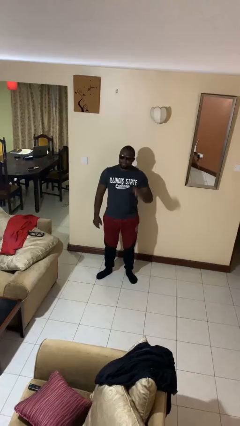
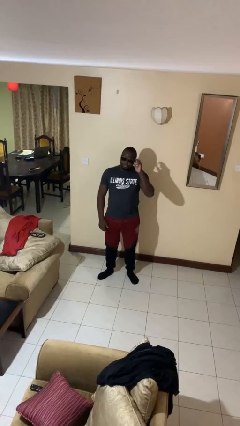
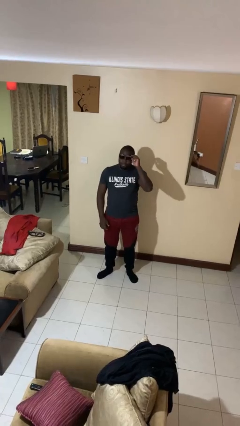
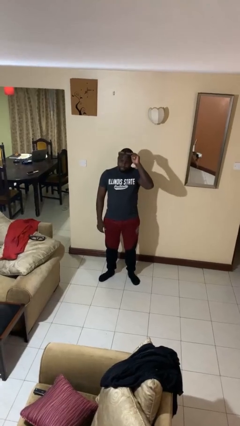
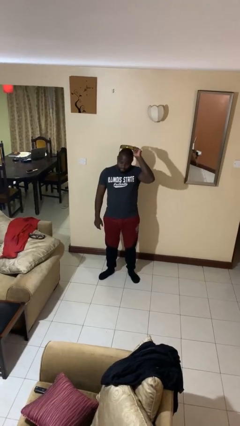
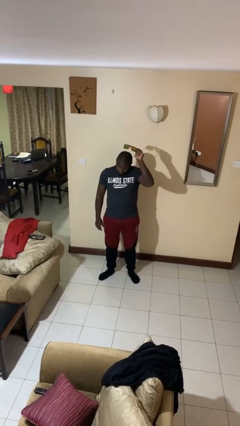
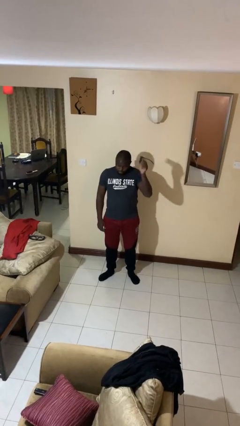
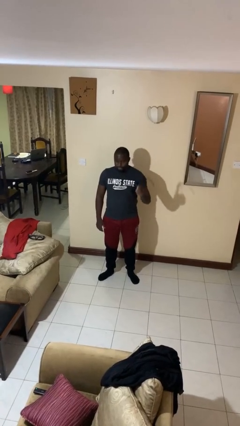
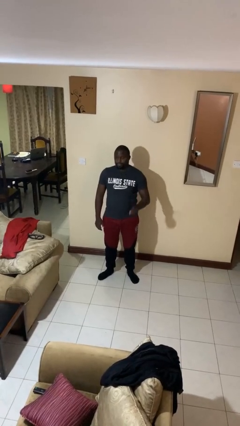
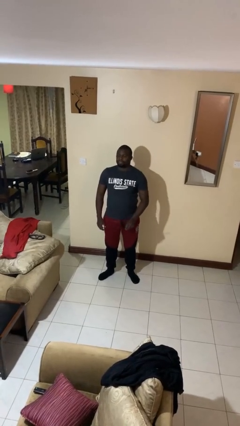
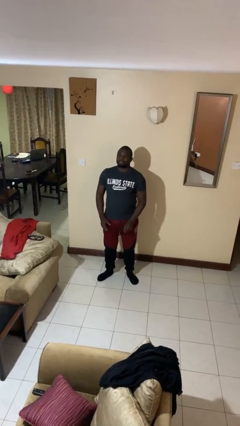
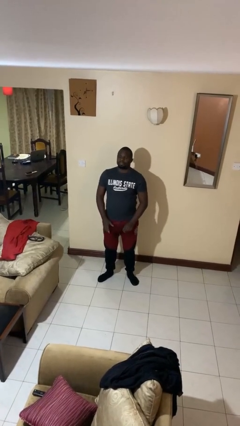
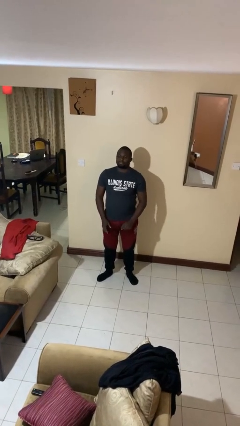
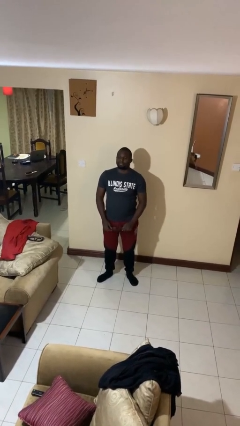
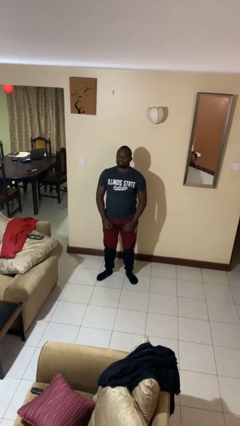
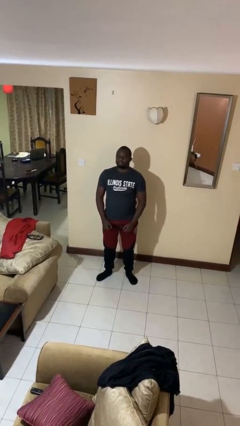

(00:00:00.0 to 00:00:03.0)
person takes off sunglasses

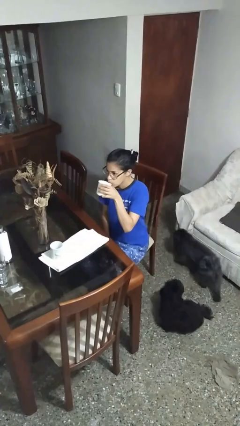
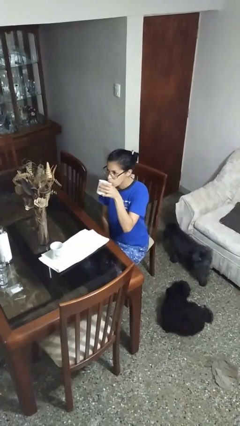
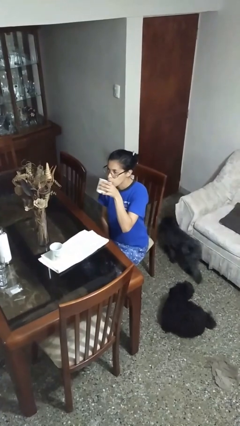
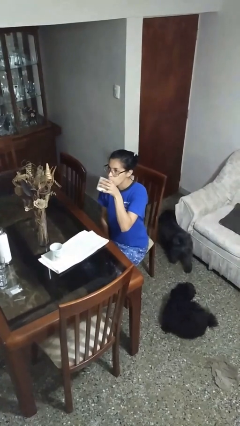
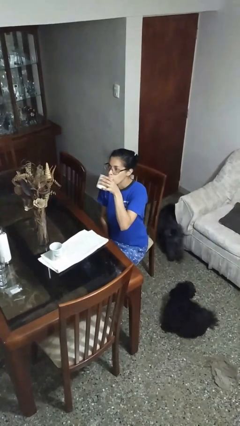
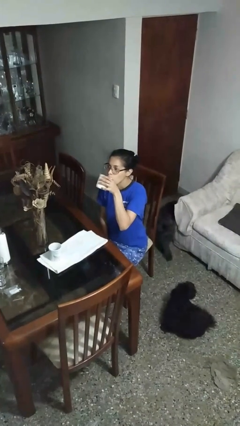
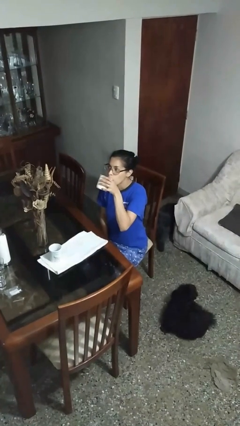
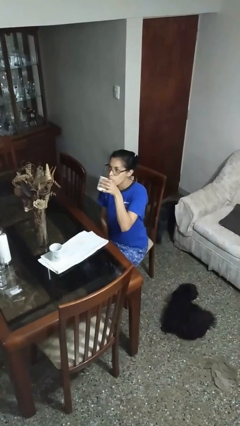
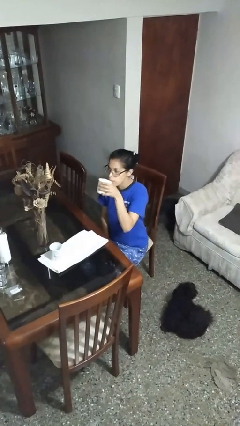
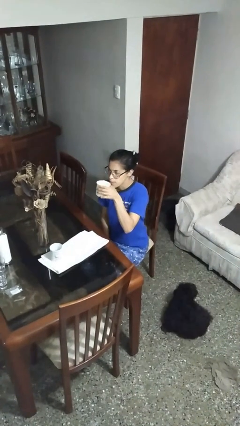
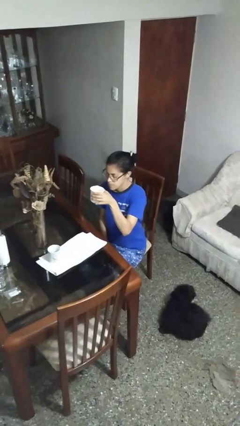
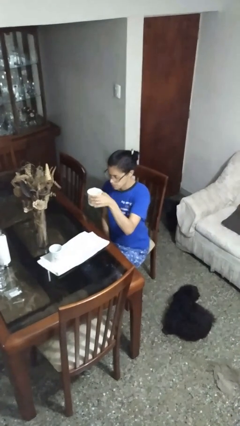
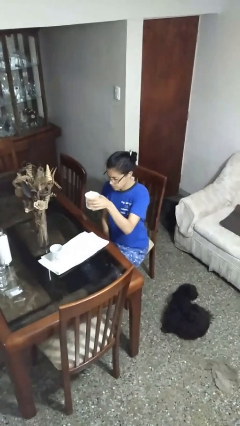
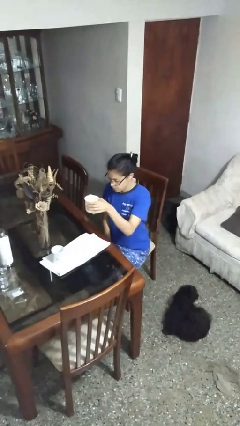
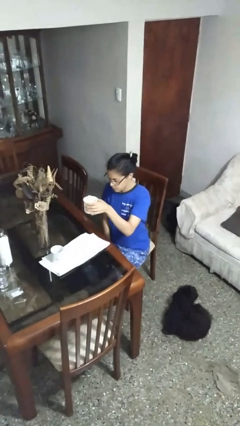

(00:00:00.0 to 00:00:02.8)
person drinks from mug

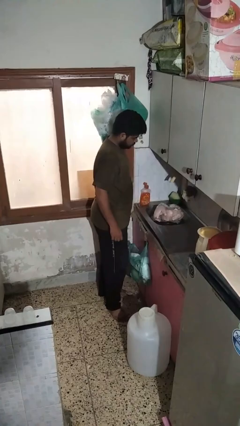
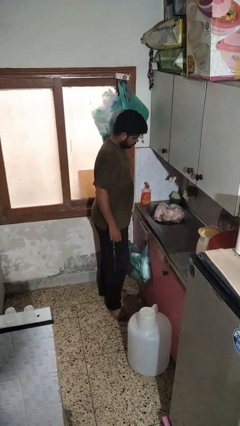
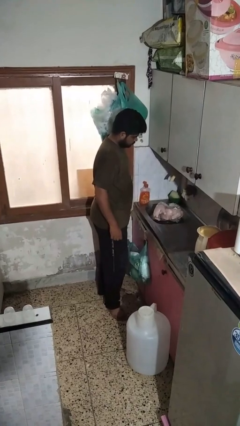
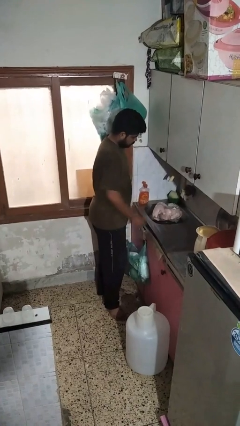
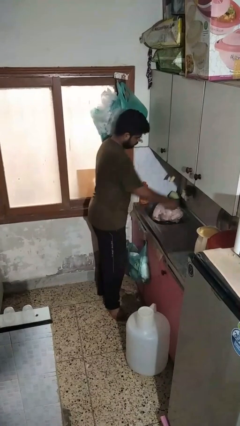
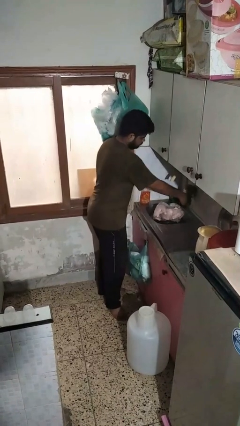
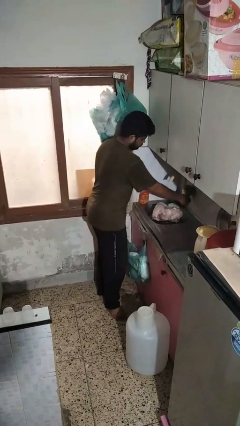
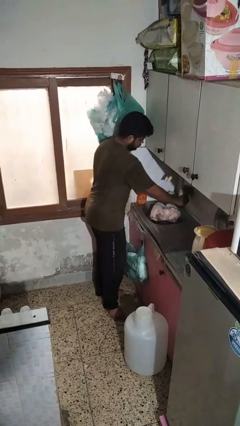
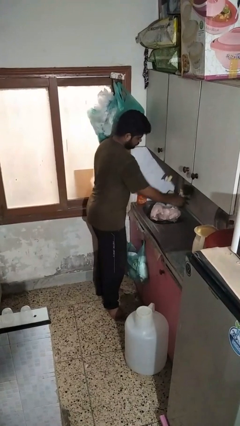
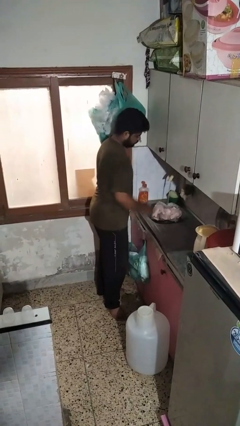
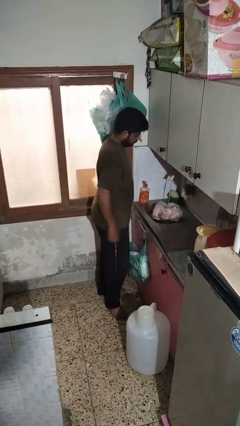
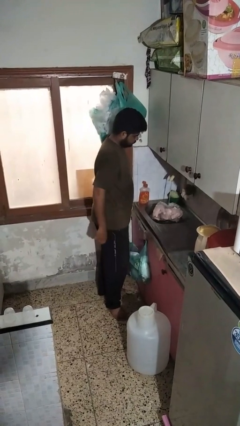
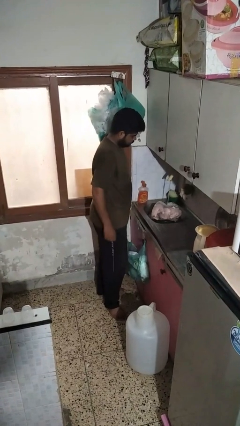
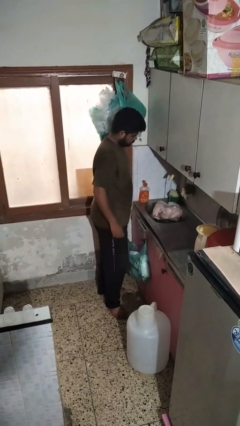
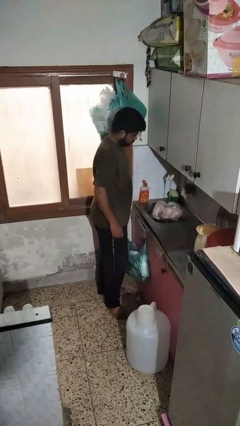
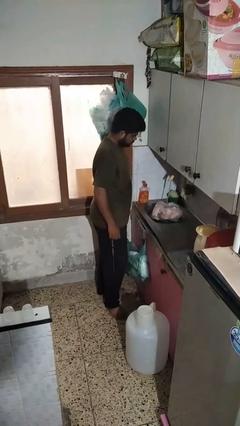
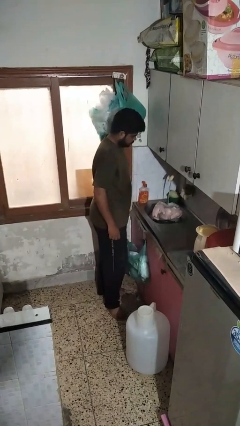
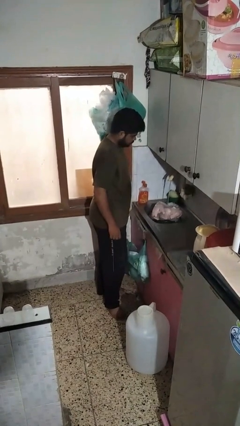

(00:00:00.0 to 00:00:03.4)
person turns on faucet

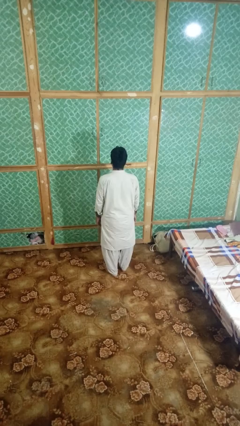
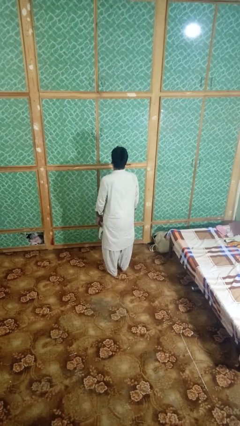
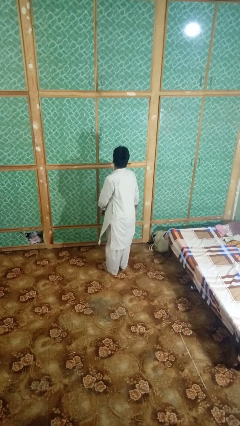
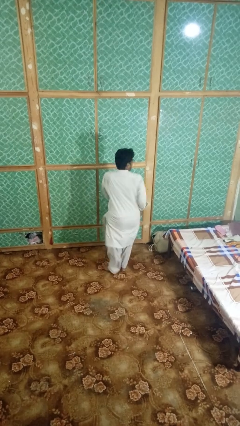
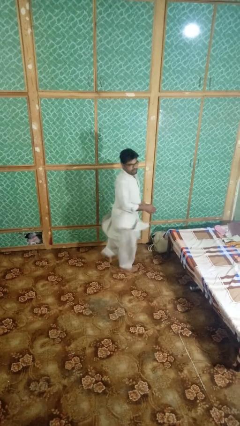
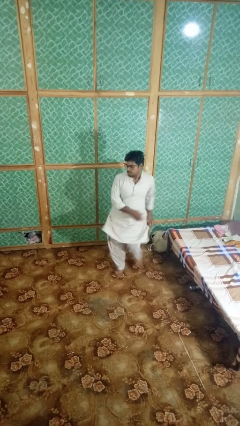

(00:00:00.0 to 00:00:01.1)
person twirls

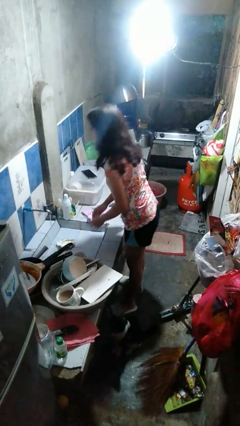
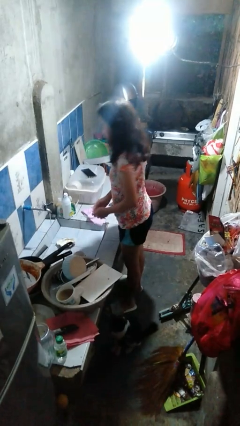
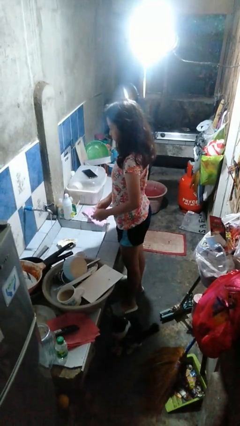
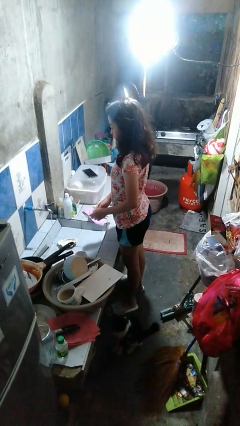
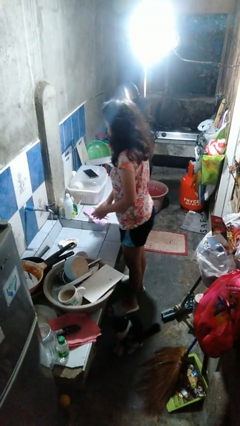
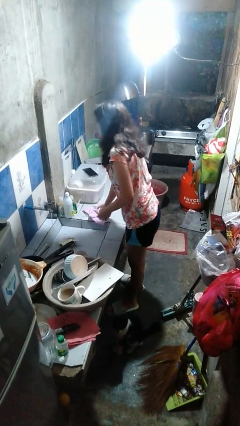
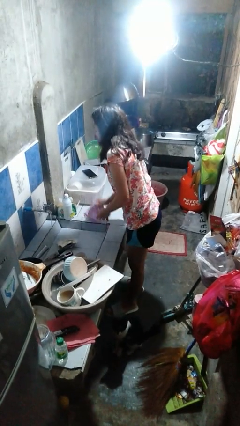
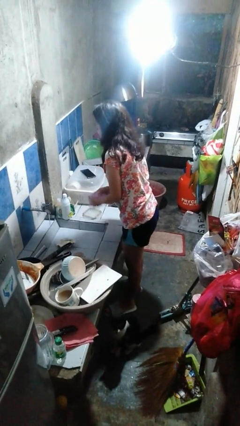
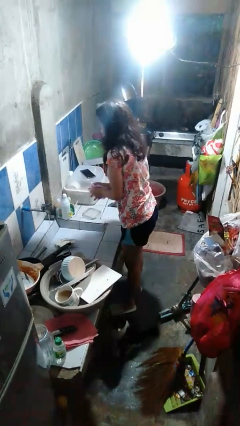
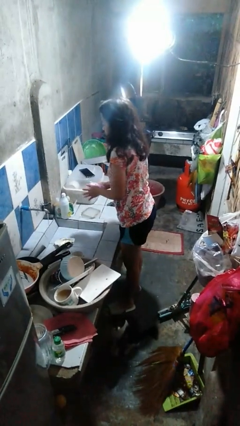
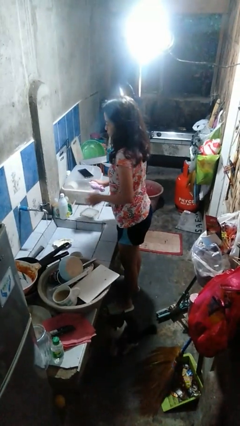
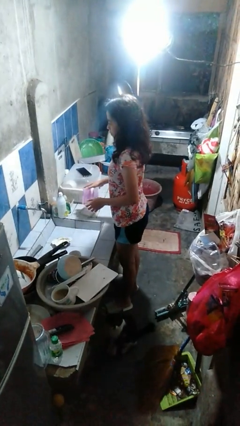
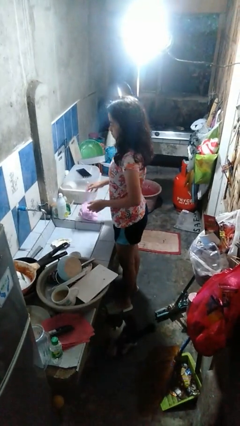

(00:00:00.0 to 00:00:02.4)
person dries hands with towel

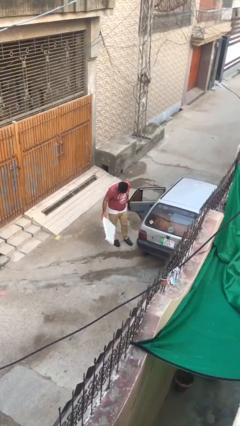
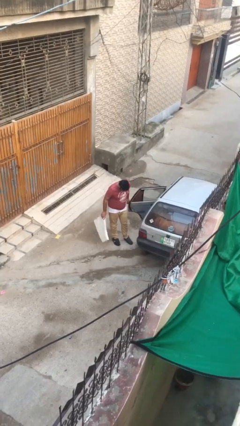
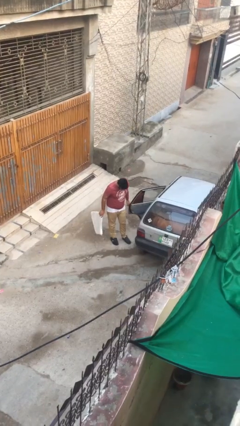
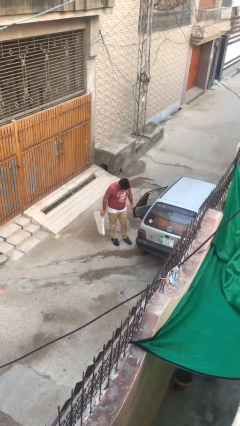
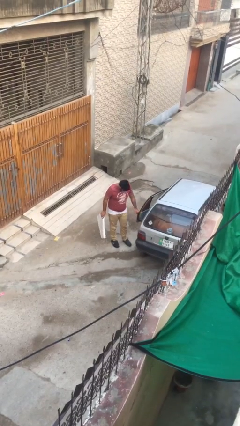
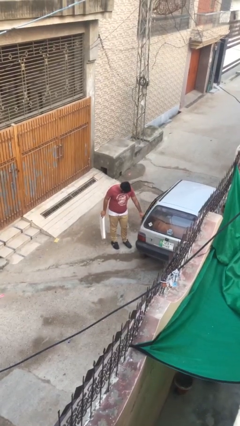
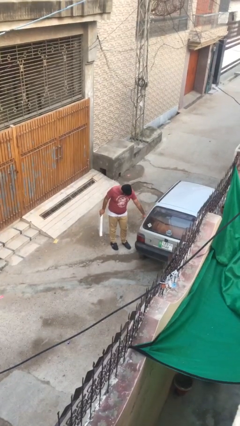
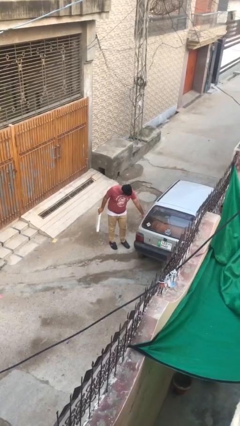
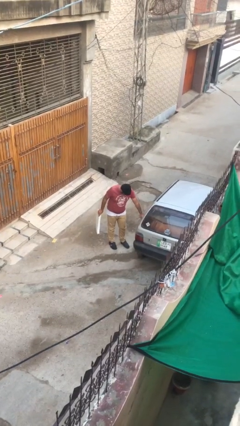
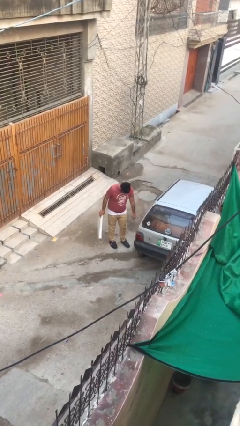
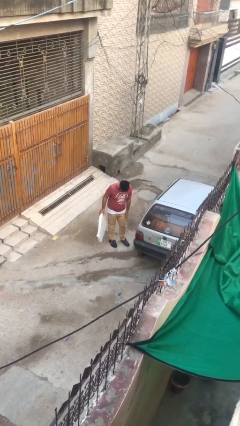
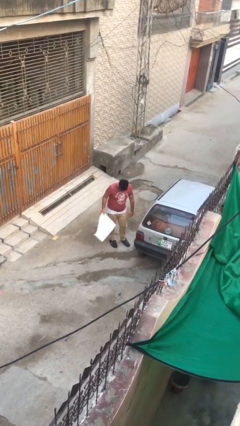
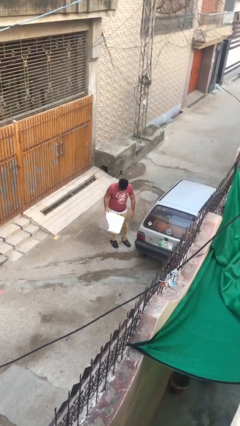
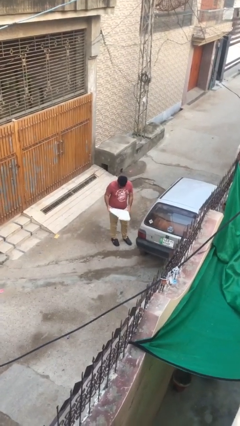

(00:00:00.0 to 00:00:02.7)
person closes car door

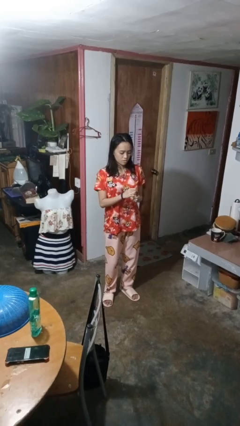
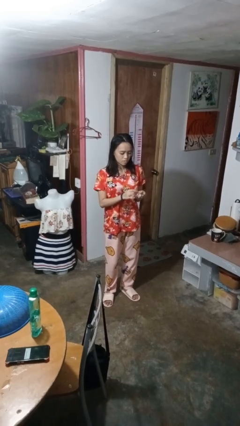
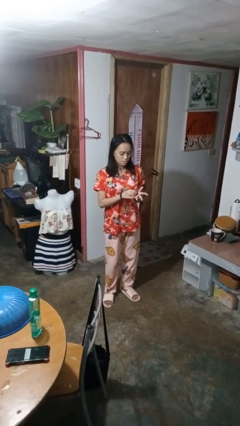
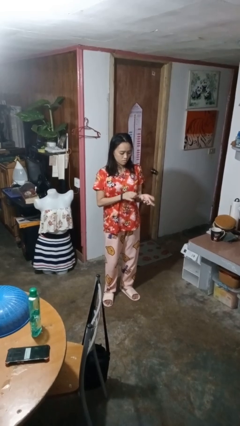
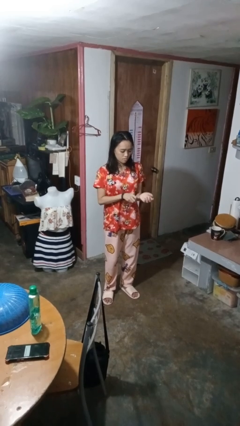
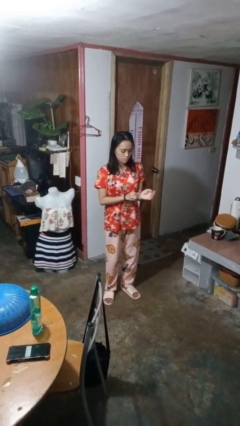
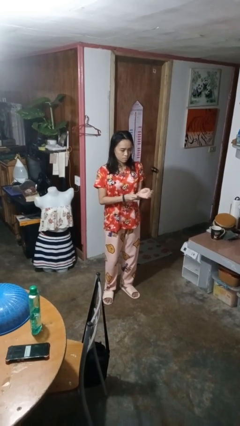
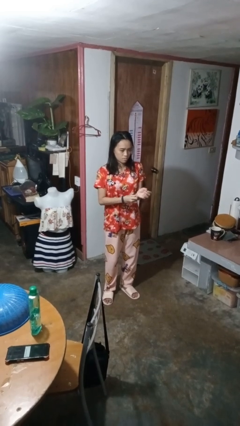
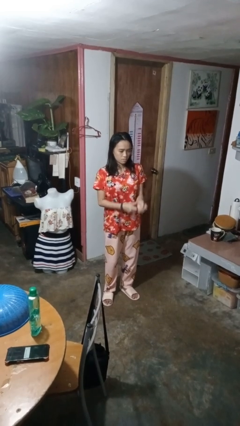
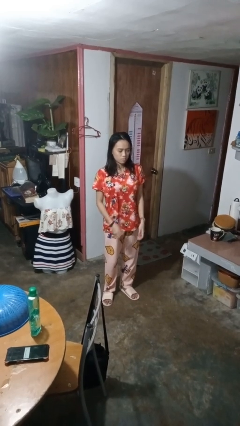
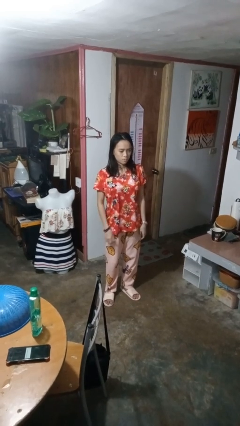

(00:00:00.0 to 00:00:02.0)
person puts on wristwatch
